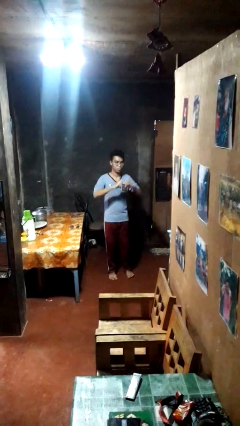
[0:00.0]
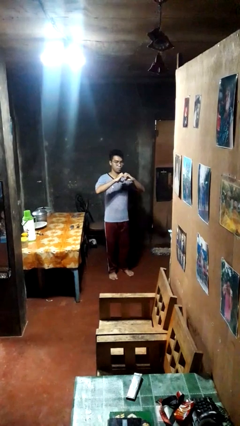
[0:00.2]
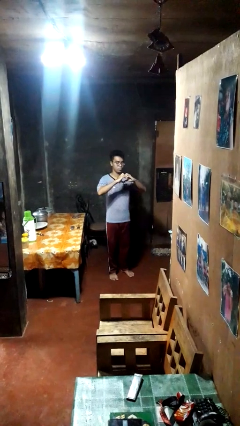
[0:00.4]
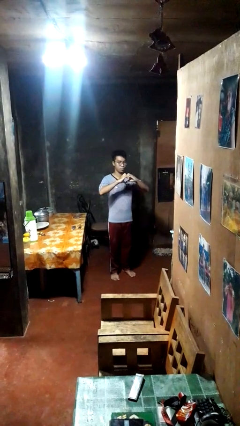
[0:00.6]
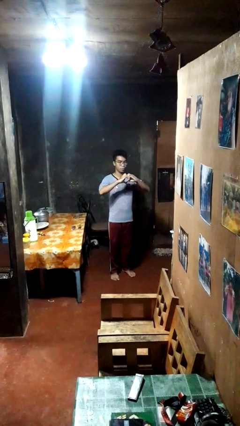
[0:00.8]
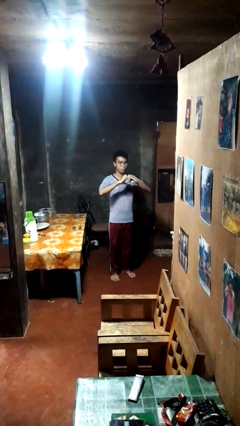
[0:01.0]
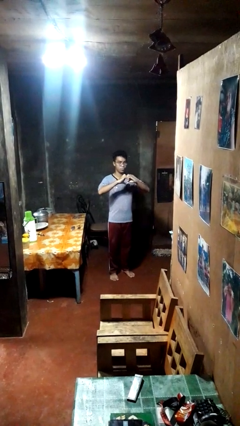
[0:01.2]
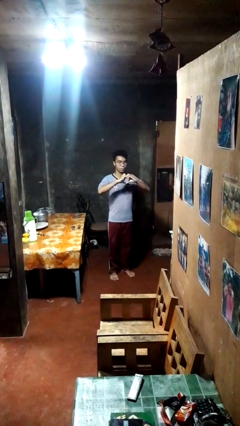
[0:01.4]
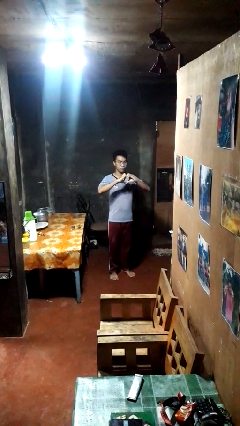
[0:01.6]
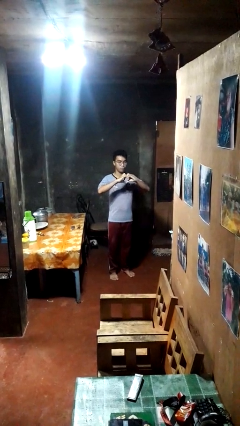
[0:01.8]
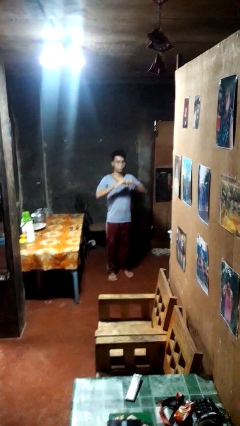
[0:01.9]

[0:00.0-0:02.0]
person gestures heart

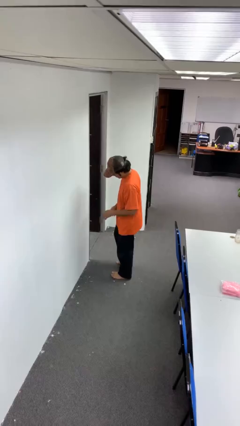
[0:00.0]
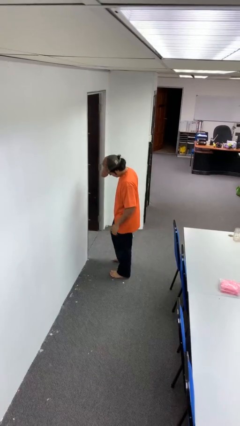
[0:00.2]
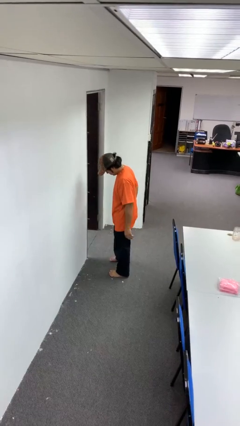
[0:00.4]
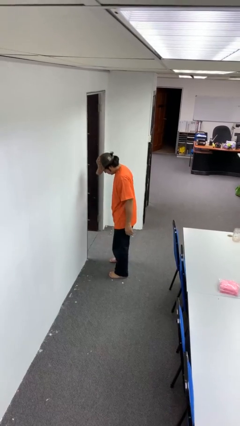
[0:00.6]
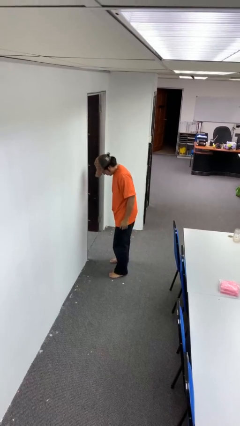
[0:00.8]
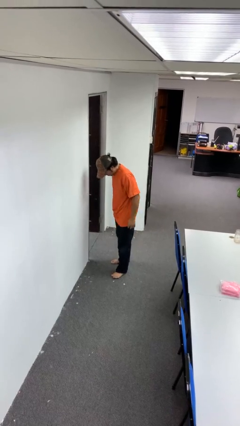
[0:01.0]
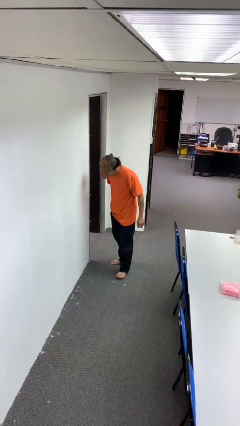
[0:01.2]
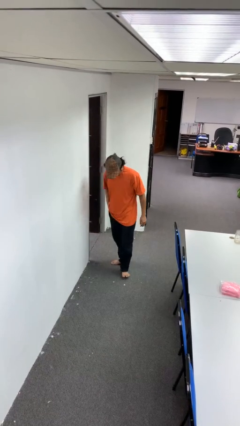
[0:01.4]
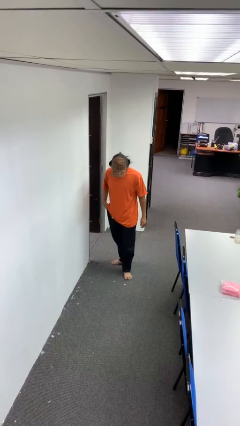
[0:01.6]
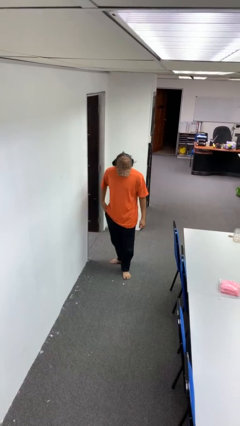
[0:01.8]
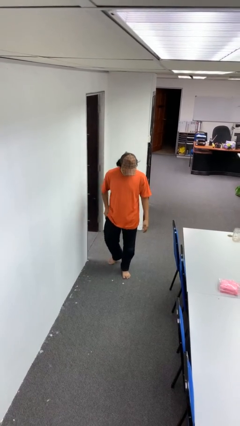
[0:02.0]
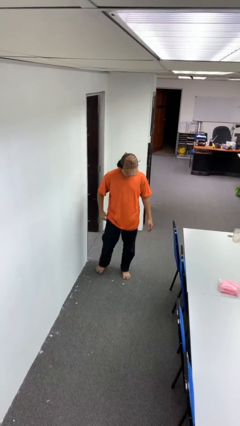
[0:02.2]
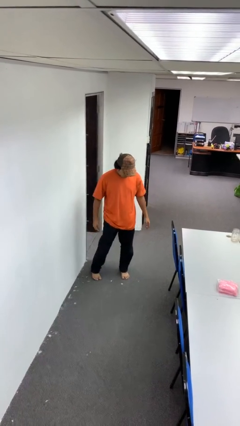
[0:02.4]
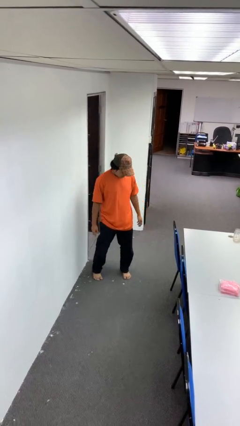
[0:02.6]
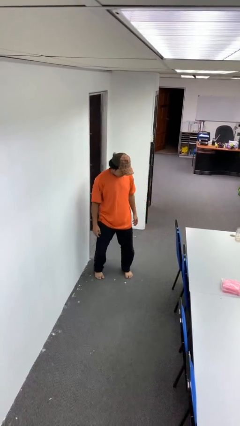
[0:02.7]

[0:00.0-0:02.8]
person puts phone into pocket

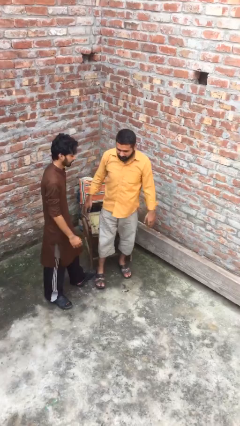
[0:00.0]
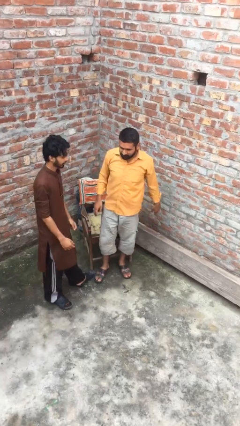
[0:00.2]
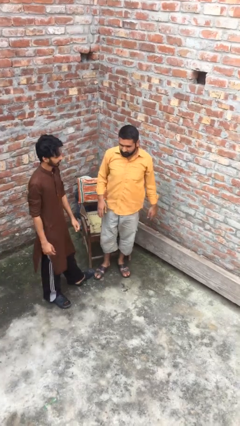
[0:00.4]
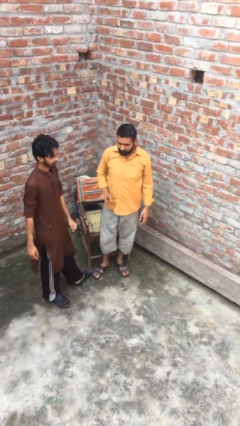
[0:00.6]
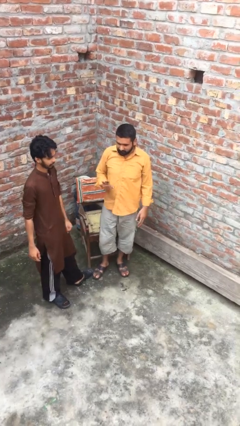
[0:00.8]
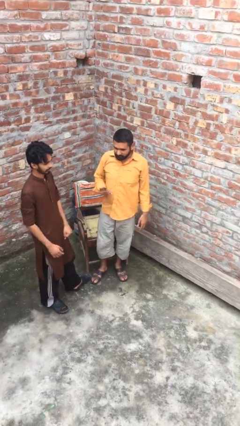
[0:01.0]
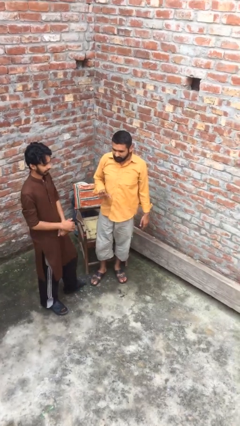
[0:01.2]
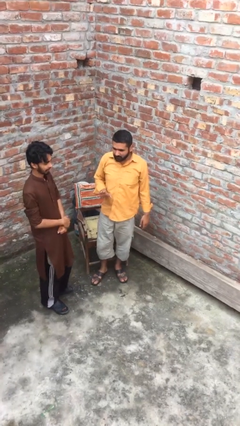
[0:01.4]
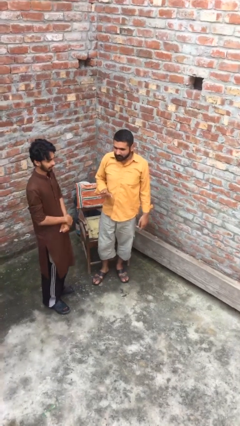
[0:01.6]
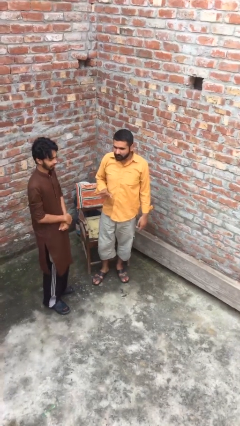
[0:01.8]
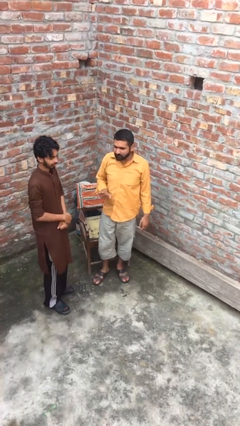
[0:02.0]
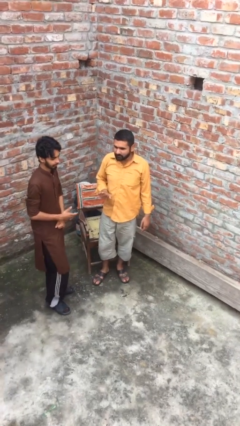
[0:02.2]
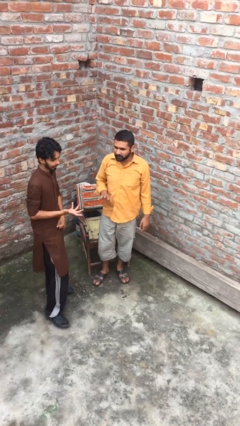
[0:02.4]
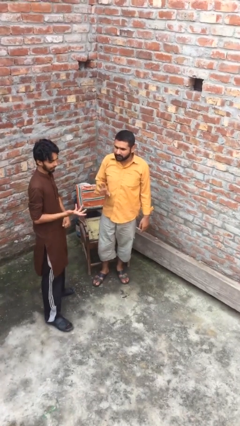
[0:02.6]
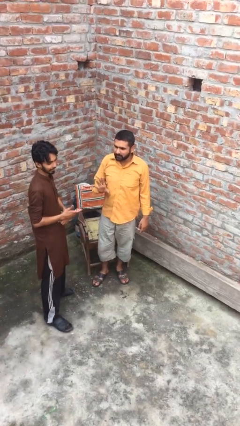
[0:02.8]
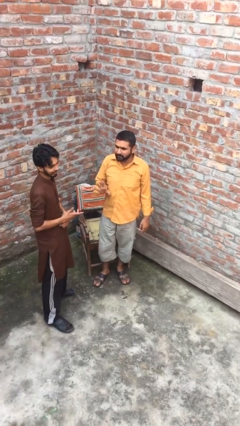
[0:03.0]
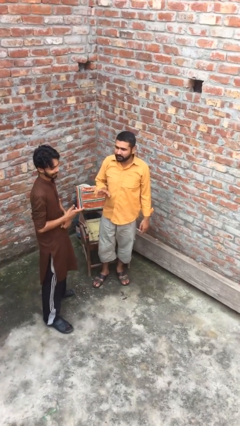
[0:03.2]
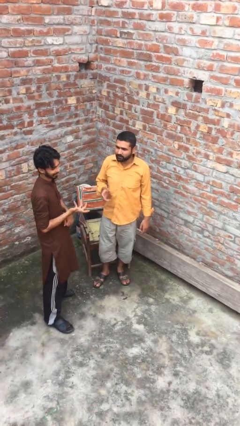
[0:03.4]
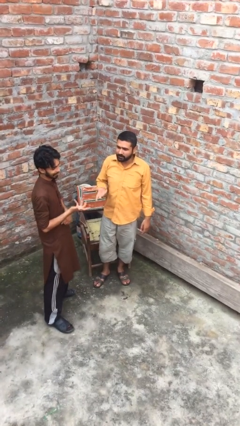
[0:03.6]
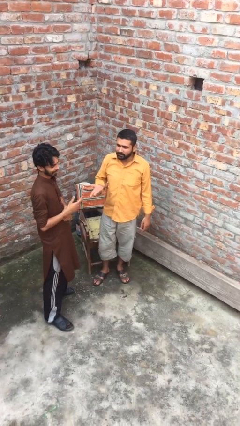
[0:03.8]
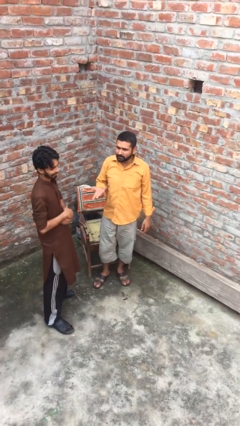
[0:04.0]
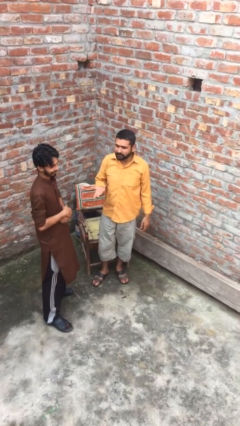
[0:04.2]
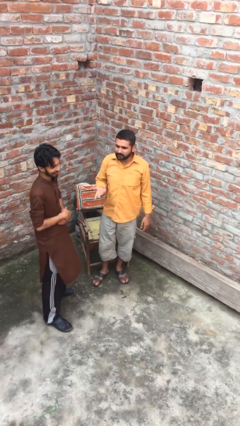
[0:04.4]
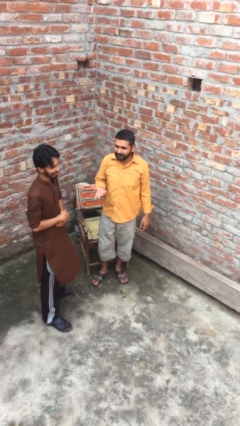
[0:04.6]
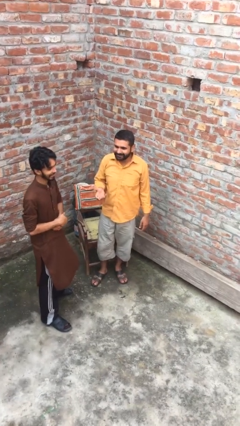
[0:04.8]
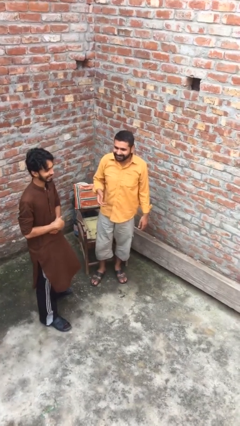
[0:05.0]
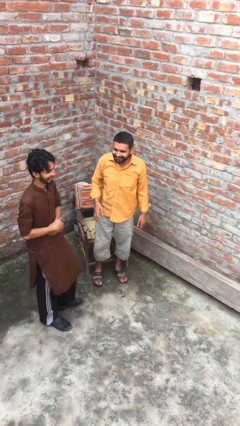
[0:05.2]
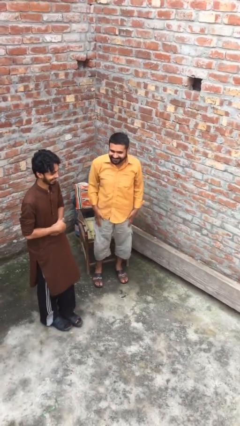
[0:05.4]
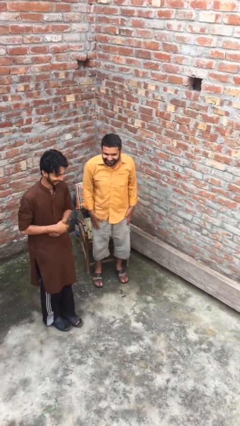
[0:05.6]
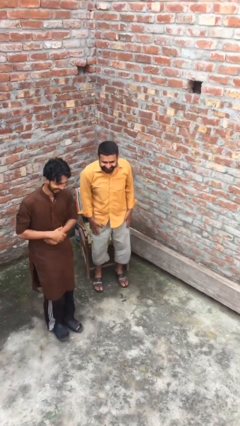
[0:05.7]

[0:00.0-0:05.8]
person talks to person

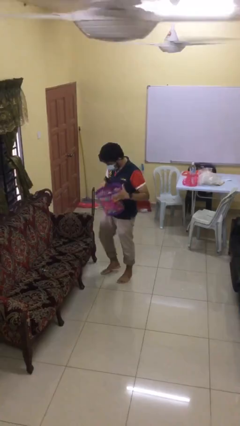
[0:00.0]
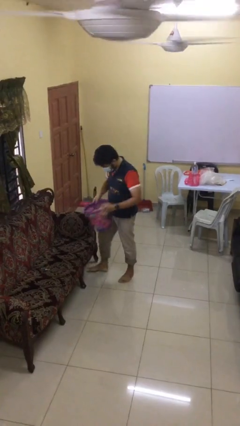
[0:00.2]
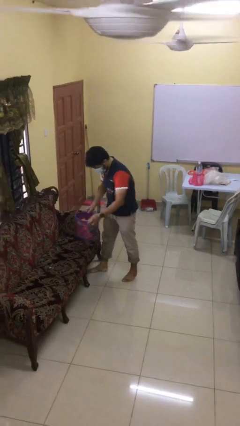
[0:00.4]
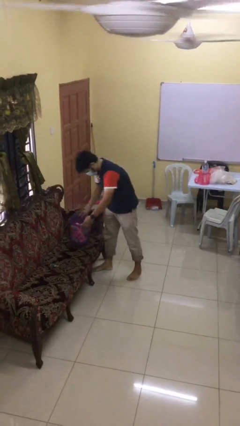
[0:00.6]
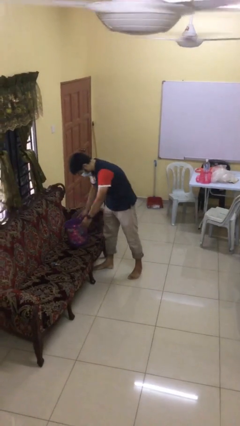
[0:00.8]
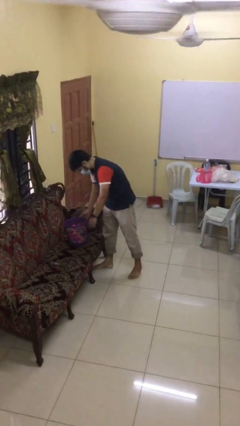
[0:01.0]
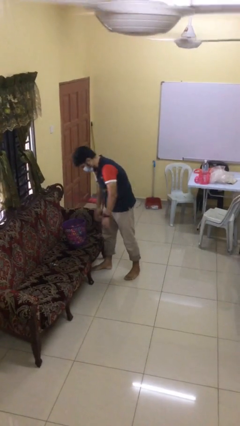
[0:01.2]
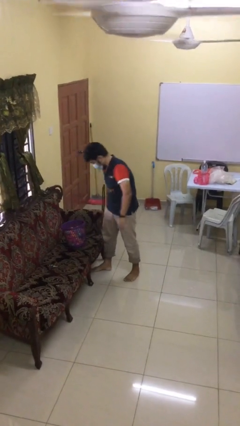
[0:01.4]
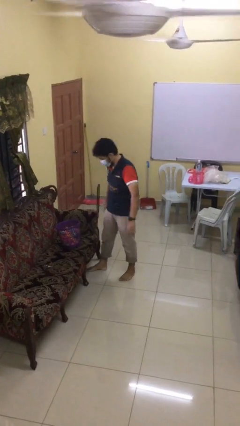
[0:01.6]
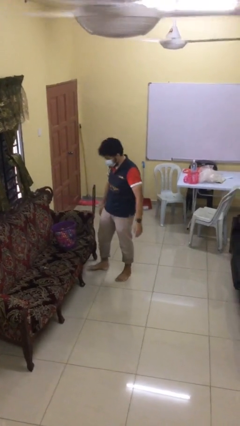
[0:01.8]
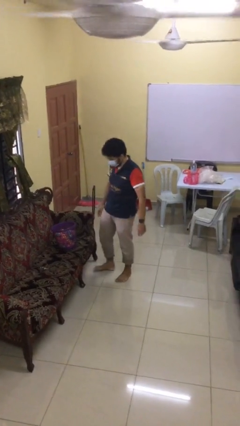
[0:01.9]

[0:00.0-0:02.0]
person puts down object on couch

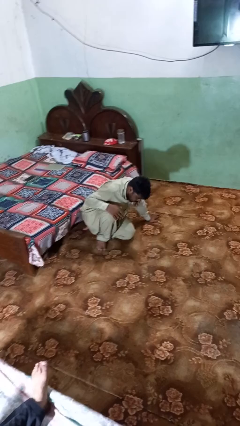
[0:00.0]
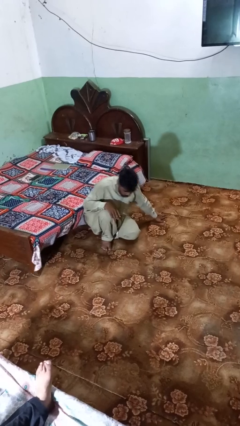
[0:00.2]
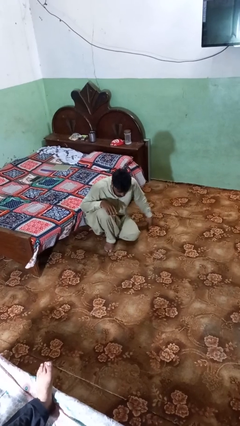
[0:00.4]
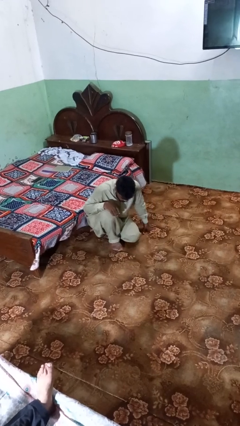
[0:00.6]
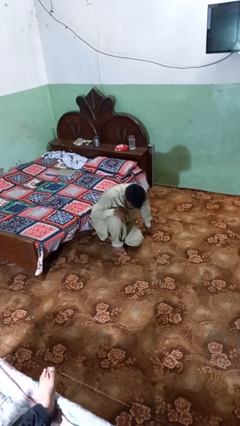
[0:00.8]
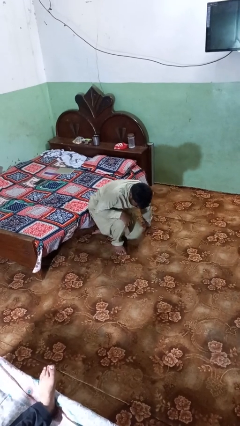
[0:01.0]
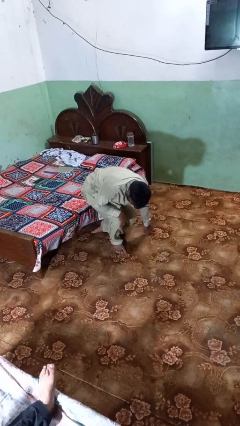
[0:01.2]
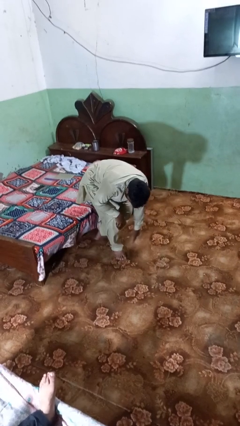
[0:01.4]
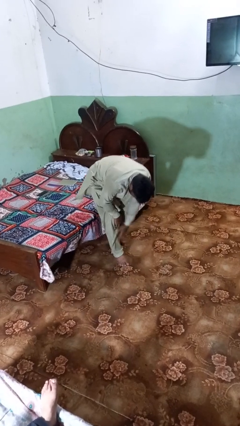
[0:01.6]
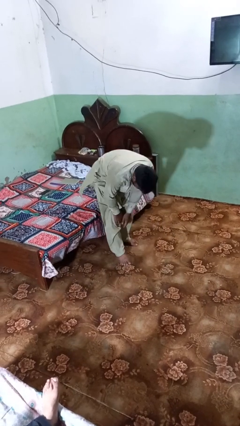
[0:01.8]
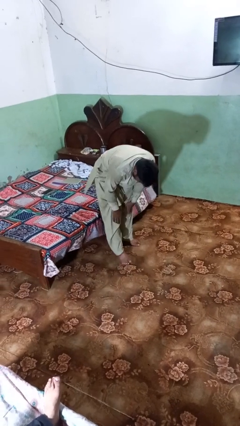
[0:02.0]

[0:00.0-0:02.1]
person stands up from floor

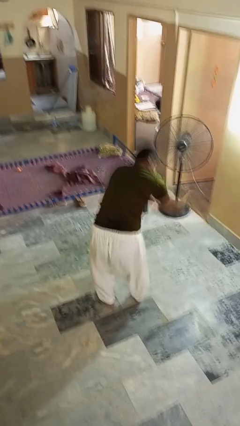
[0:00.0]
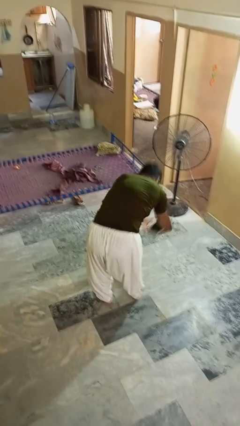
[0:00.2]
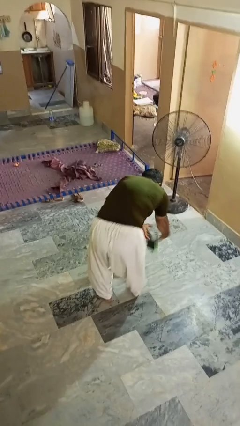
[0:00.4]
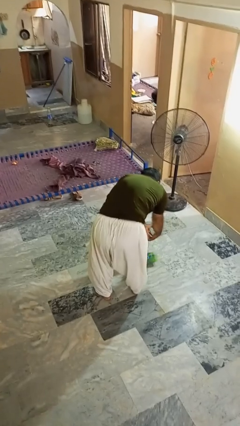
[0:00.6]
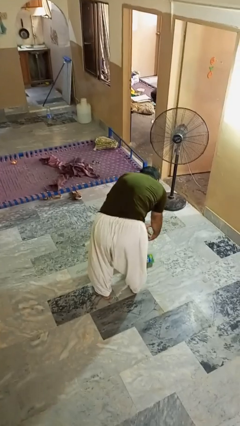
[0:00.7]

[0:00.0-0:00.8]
person catches dropped object

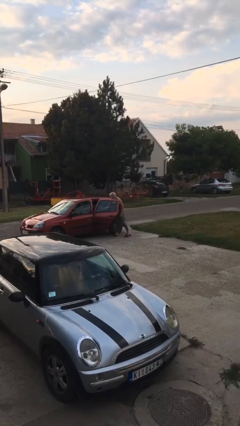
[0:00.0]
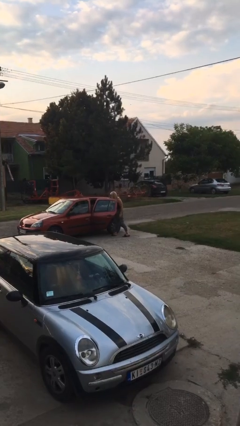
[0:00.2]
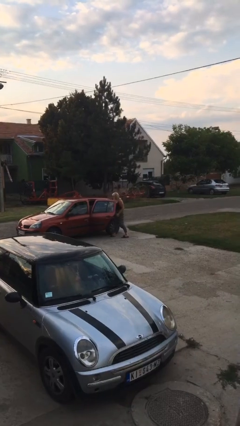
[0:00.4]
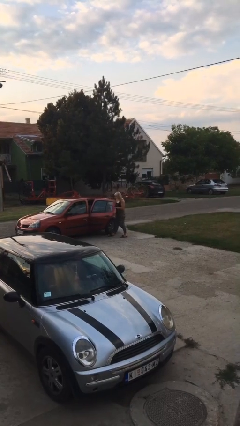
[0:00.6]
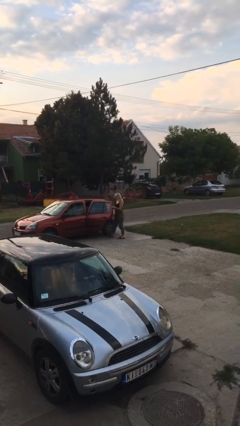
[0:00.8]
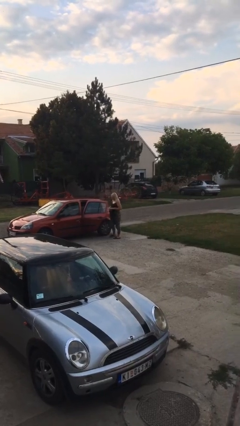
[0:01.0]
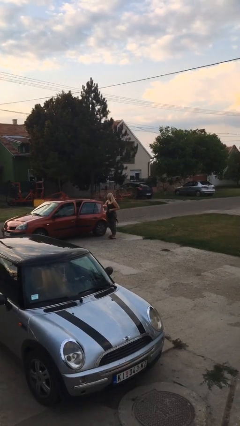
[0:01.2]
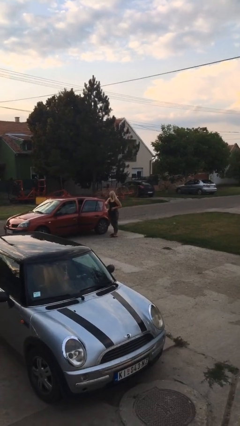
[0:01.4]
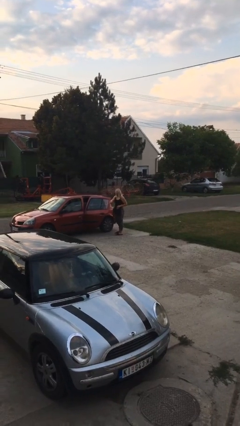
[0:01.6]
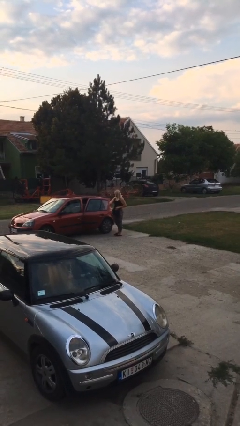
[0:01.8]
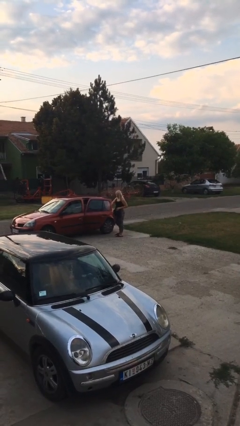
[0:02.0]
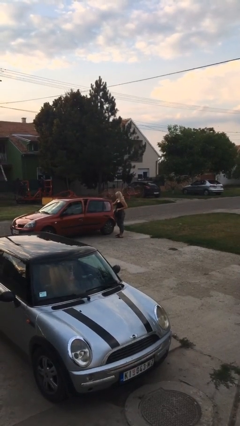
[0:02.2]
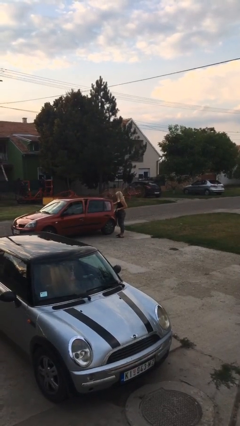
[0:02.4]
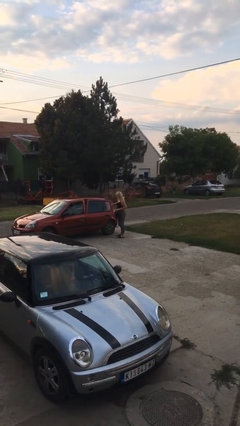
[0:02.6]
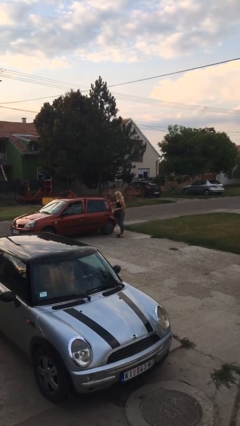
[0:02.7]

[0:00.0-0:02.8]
person unloads car
